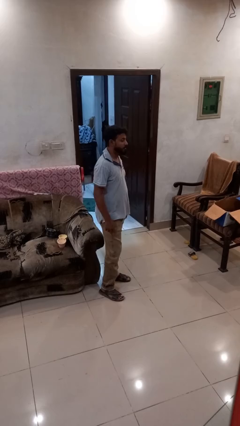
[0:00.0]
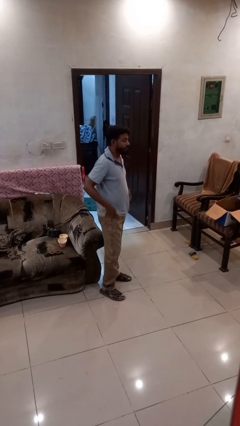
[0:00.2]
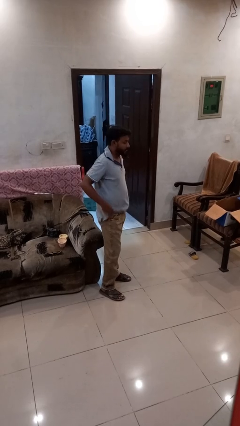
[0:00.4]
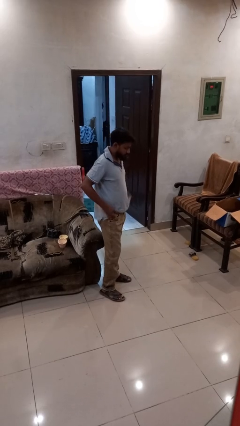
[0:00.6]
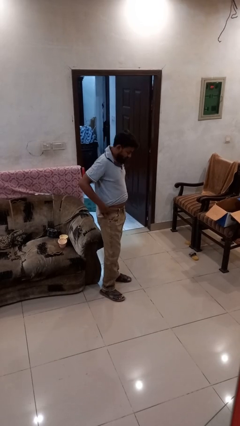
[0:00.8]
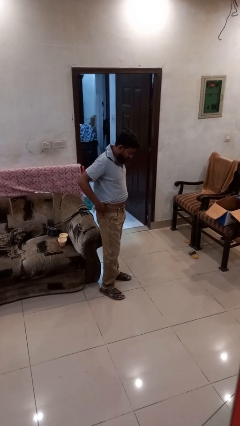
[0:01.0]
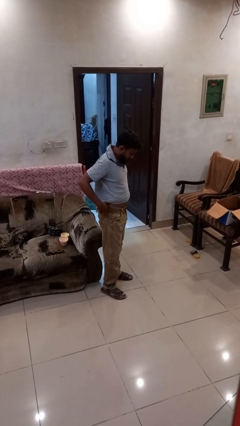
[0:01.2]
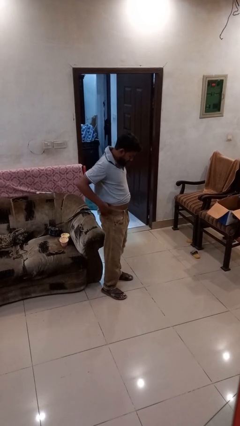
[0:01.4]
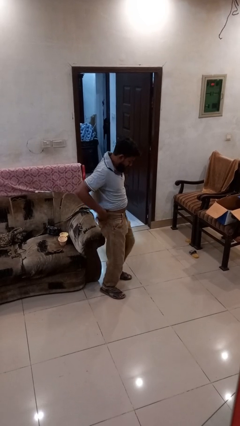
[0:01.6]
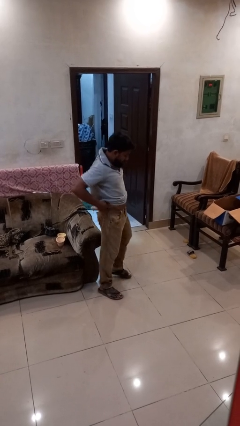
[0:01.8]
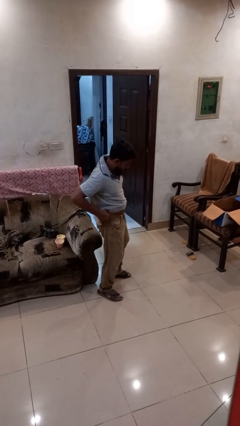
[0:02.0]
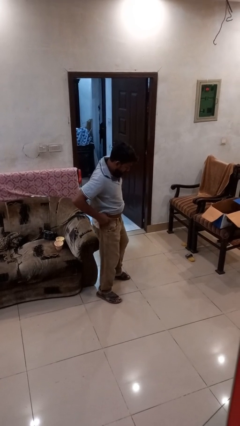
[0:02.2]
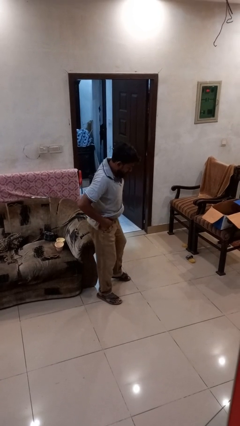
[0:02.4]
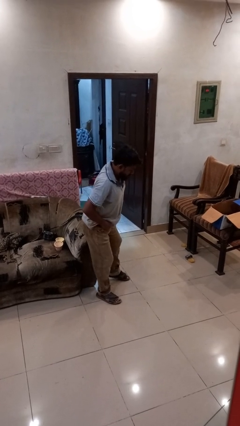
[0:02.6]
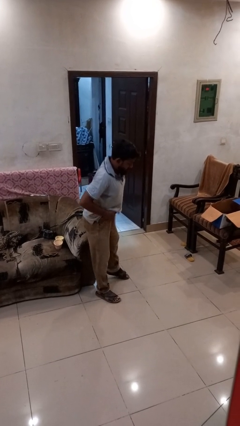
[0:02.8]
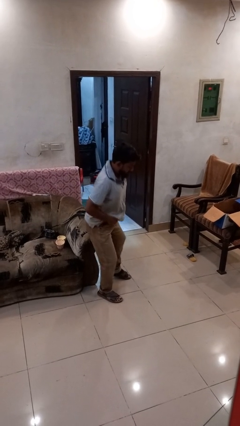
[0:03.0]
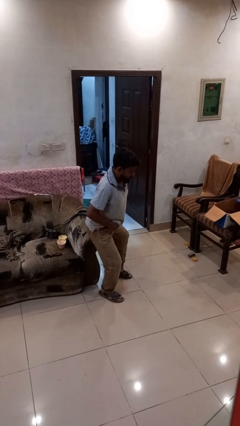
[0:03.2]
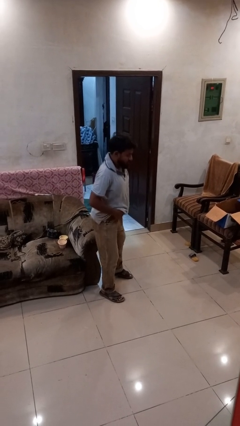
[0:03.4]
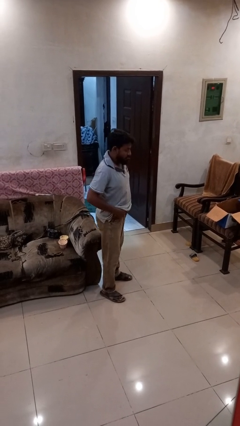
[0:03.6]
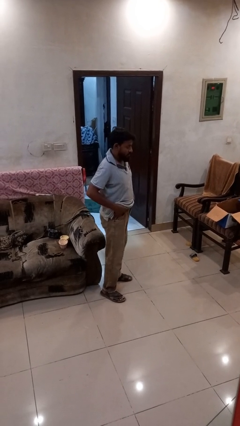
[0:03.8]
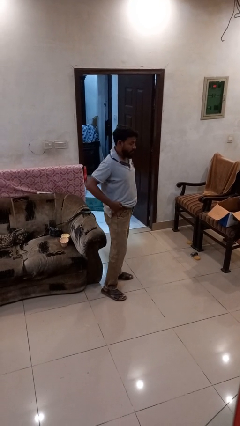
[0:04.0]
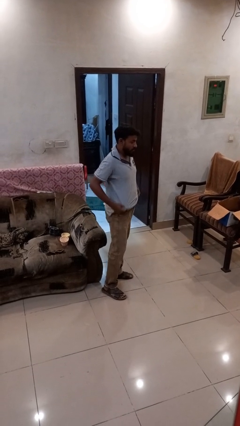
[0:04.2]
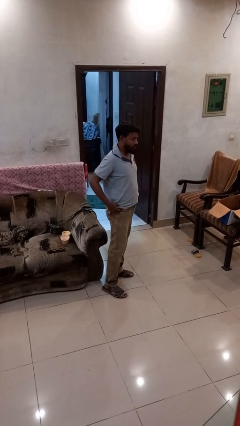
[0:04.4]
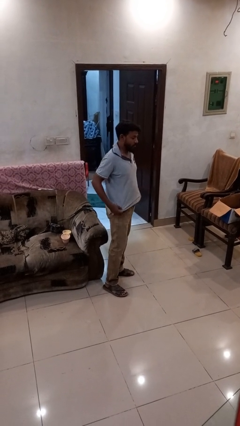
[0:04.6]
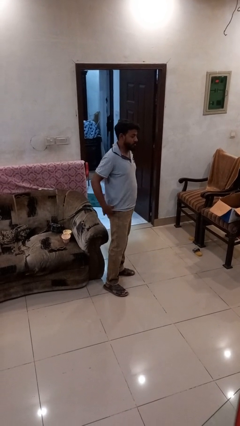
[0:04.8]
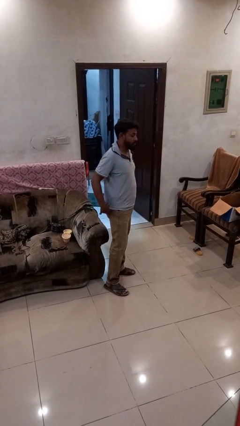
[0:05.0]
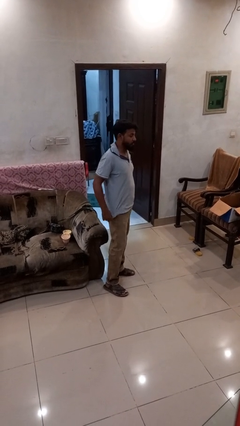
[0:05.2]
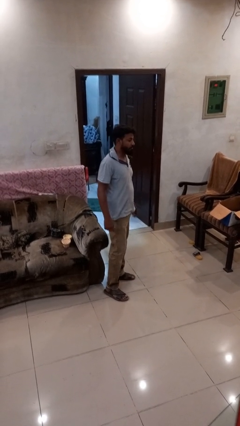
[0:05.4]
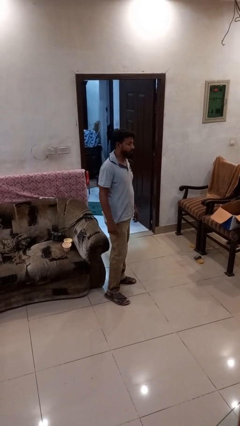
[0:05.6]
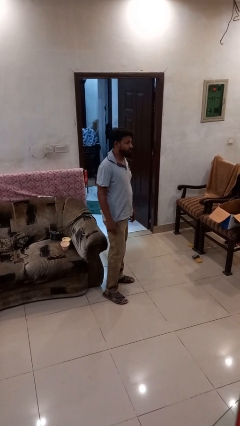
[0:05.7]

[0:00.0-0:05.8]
person hikes up pants

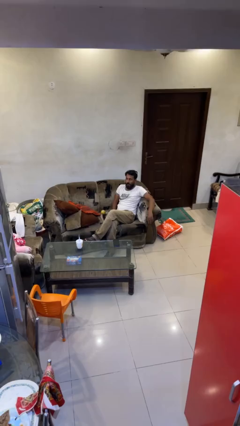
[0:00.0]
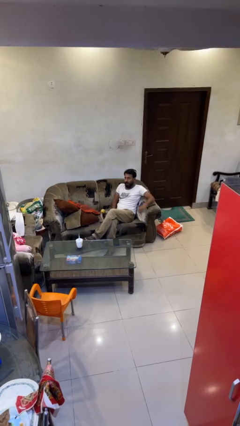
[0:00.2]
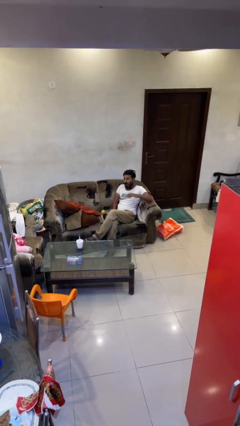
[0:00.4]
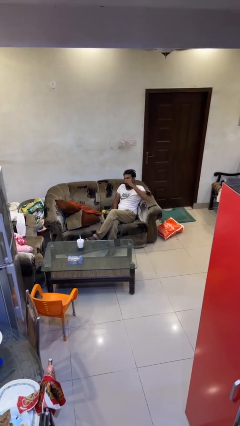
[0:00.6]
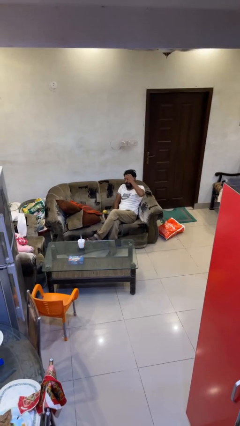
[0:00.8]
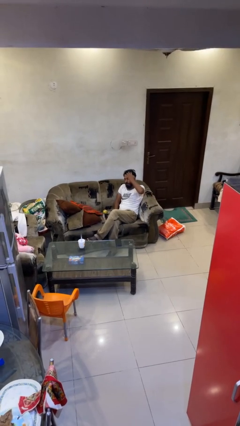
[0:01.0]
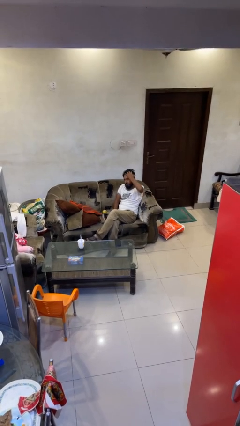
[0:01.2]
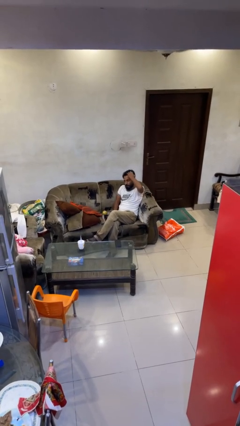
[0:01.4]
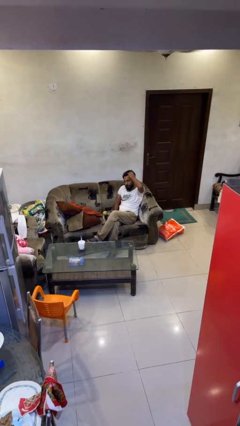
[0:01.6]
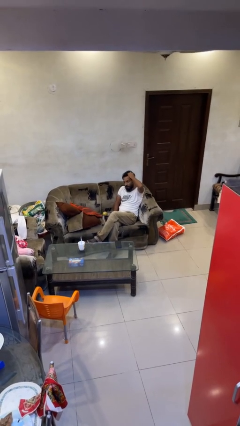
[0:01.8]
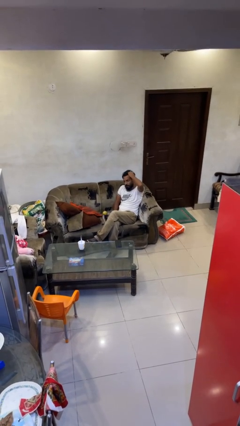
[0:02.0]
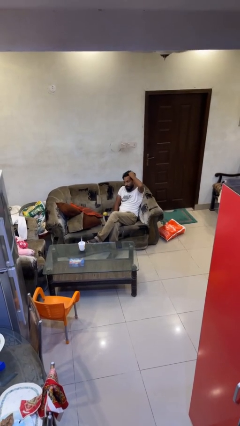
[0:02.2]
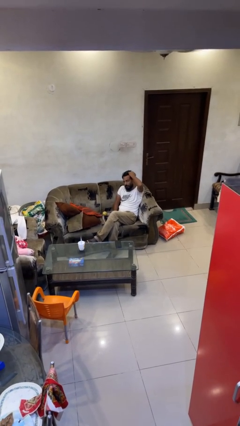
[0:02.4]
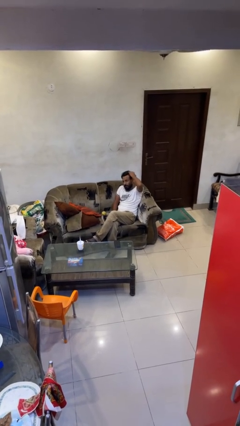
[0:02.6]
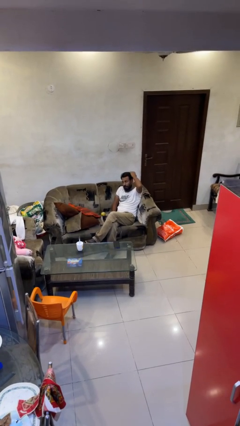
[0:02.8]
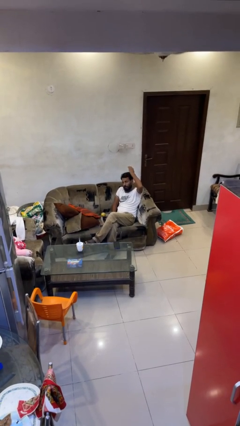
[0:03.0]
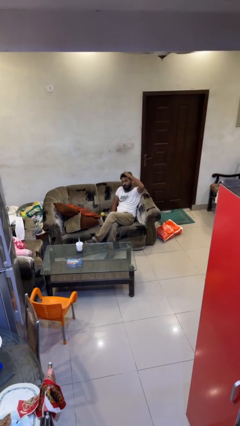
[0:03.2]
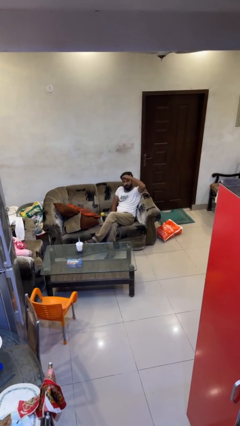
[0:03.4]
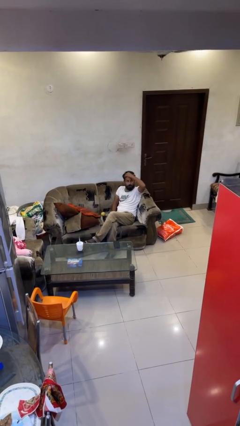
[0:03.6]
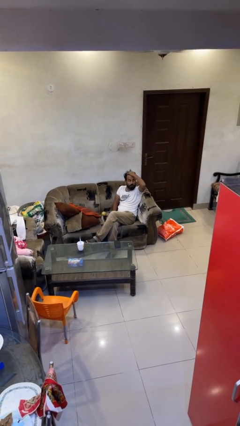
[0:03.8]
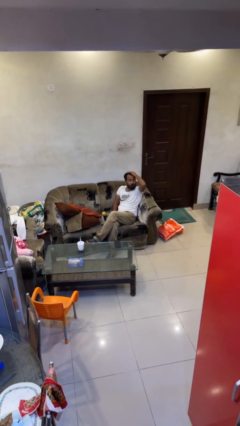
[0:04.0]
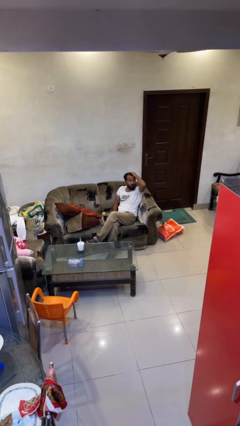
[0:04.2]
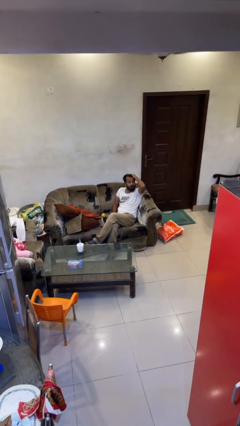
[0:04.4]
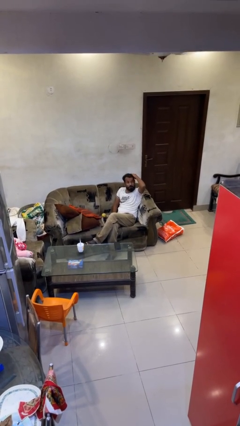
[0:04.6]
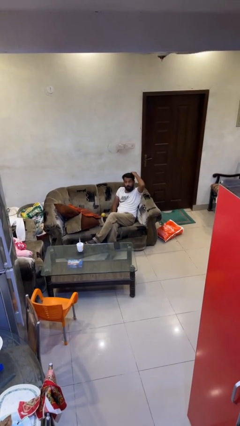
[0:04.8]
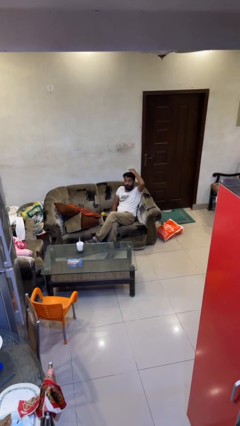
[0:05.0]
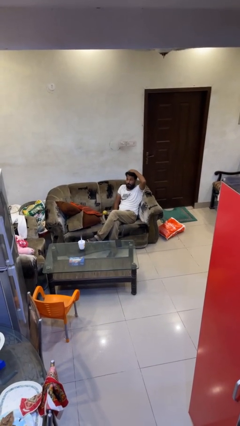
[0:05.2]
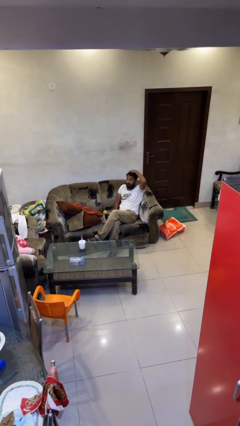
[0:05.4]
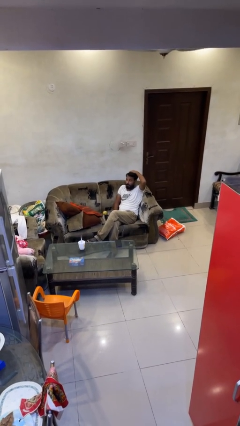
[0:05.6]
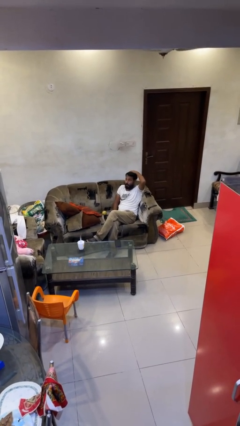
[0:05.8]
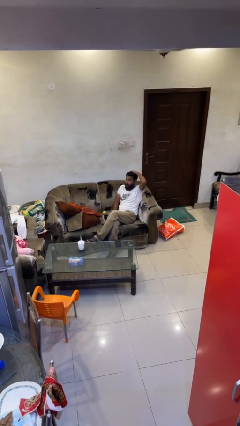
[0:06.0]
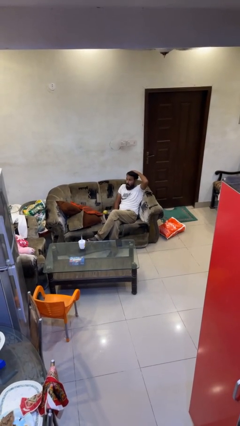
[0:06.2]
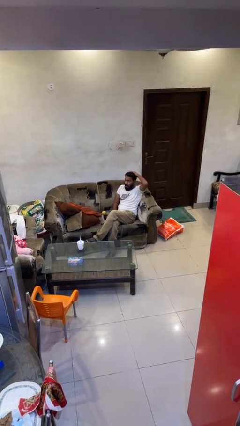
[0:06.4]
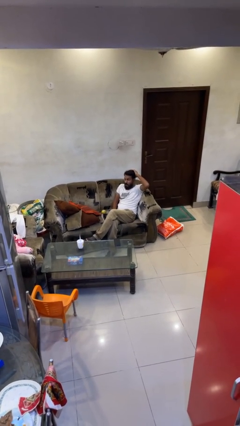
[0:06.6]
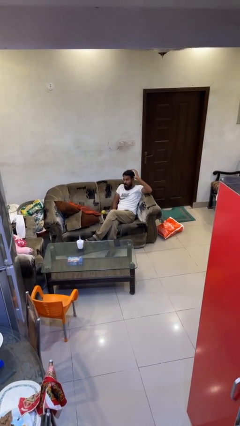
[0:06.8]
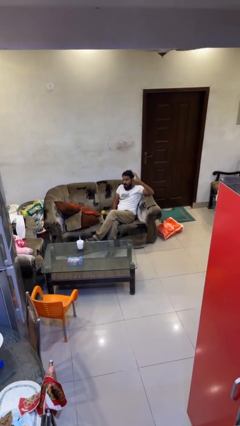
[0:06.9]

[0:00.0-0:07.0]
person strokes hair

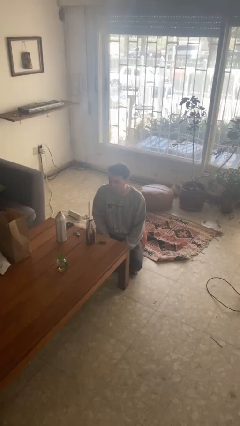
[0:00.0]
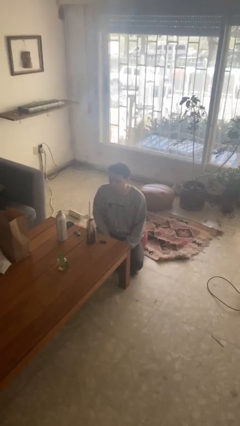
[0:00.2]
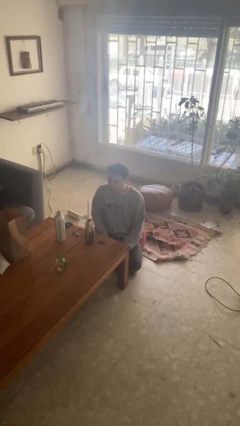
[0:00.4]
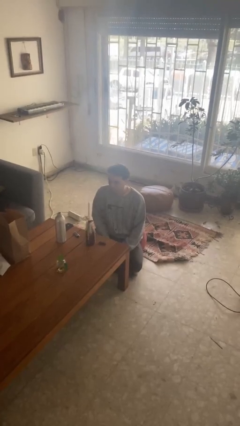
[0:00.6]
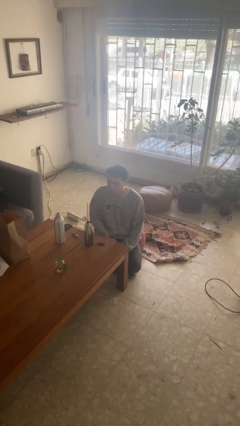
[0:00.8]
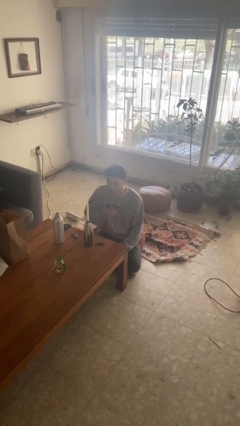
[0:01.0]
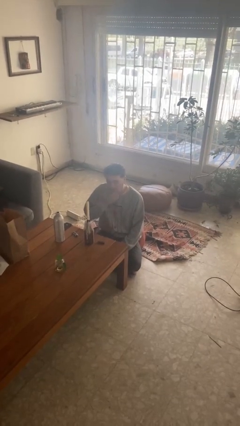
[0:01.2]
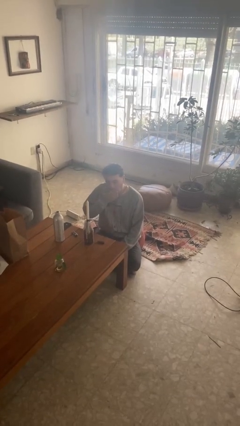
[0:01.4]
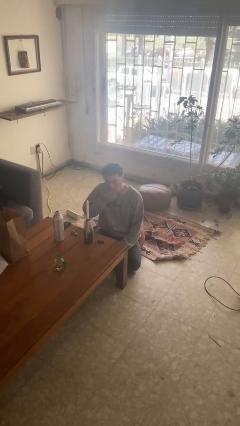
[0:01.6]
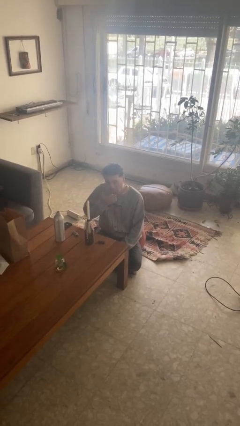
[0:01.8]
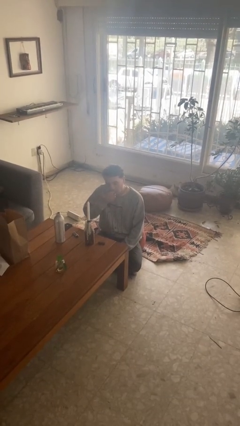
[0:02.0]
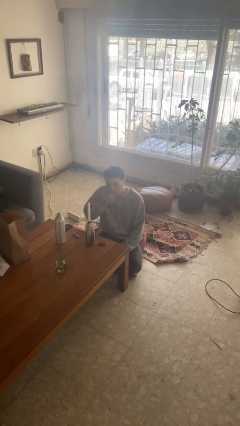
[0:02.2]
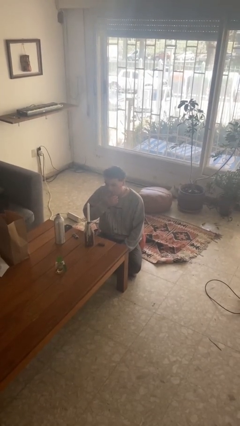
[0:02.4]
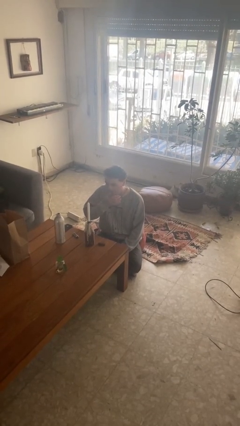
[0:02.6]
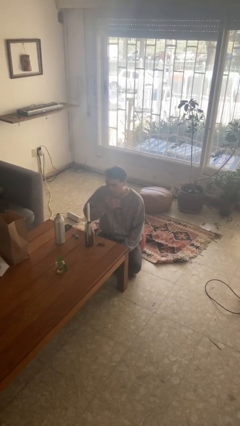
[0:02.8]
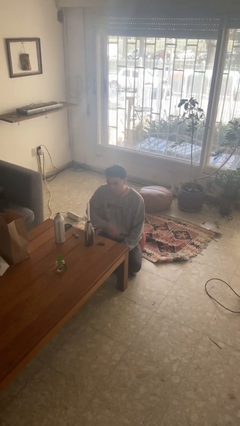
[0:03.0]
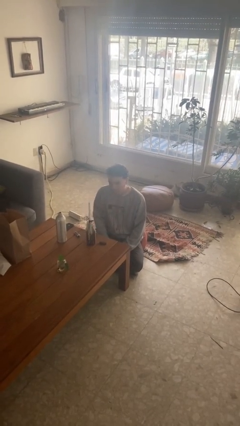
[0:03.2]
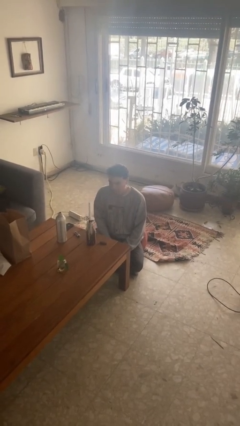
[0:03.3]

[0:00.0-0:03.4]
person licks fingers

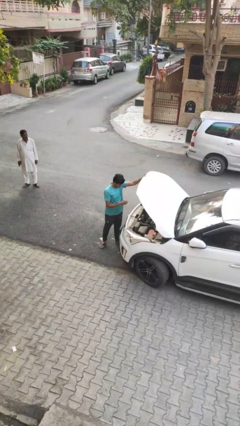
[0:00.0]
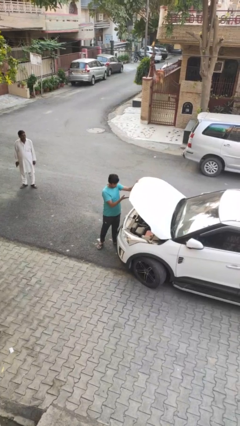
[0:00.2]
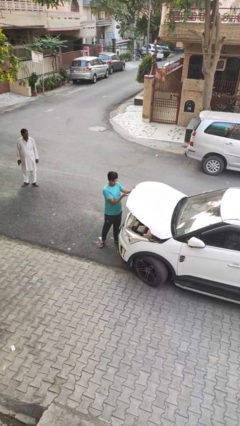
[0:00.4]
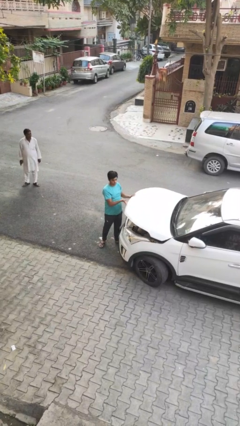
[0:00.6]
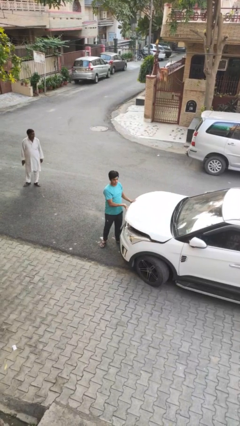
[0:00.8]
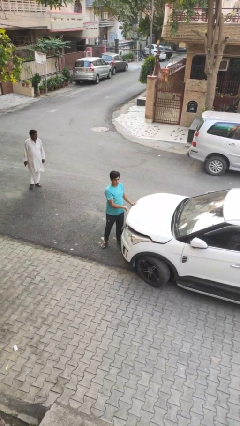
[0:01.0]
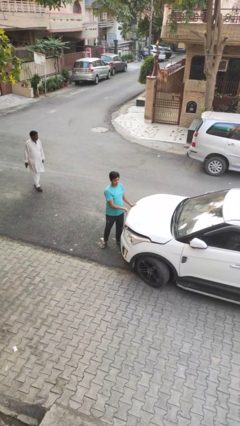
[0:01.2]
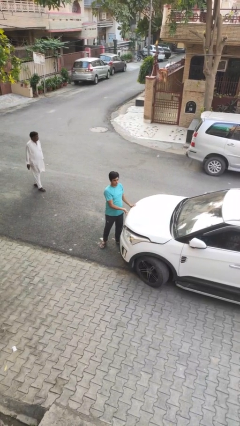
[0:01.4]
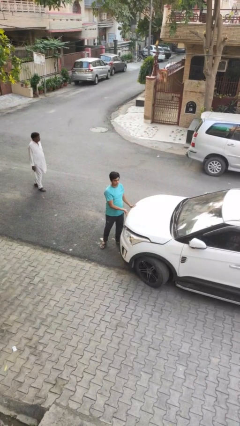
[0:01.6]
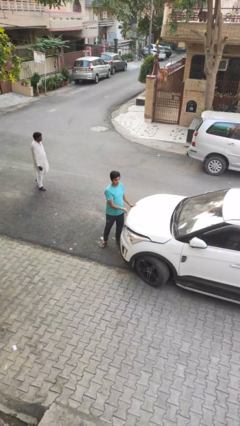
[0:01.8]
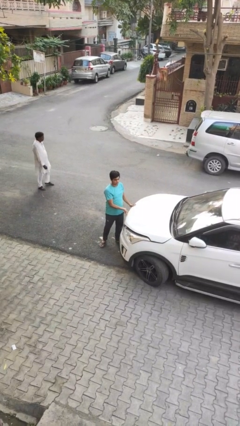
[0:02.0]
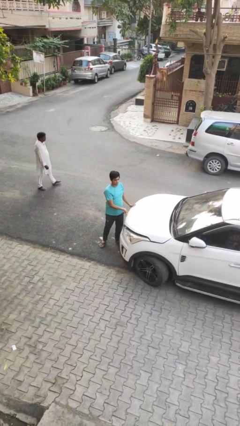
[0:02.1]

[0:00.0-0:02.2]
person closes car hood
